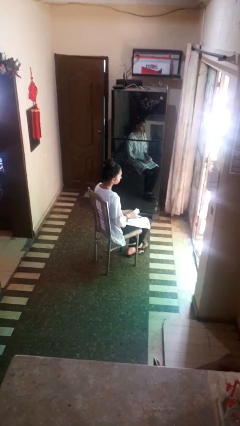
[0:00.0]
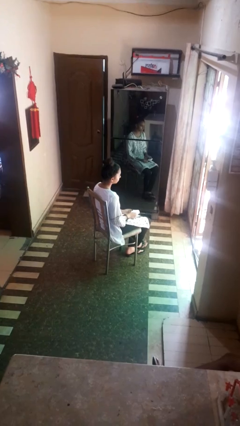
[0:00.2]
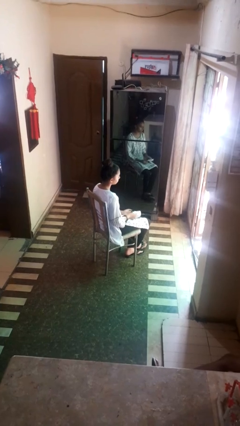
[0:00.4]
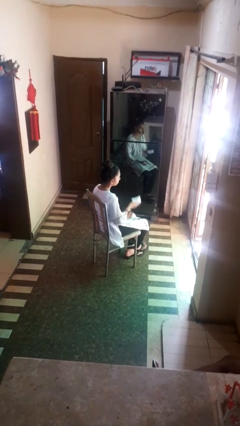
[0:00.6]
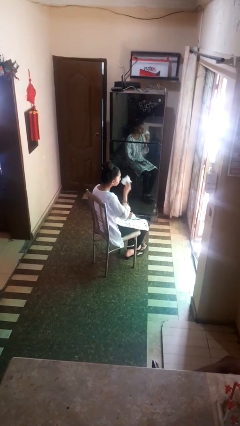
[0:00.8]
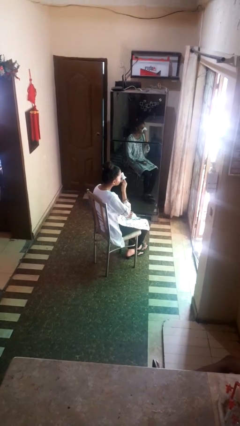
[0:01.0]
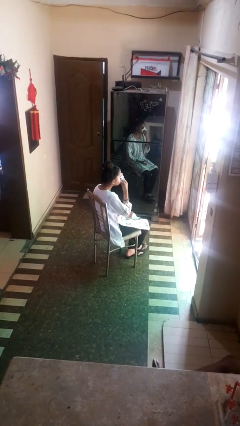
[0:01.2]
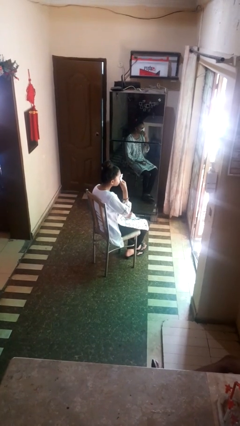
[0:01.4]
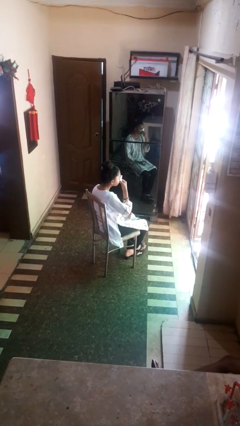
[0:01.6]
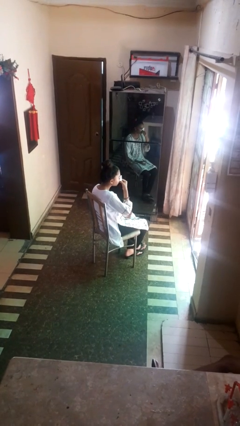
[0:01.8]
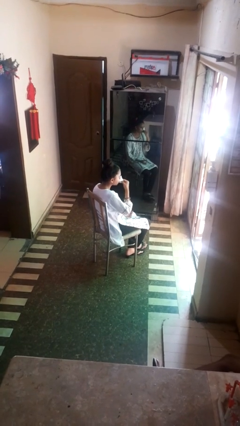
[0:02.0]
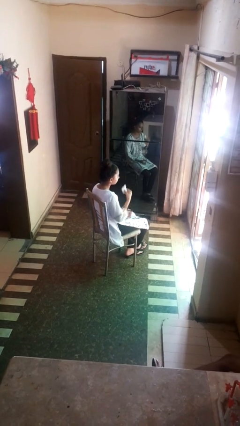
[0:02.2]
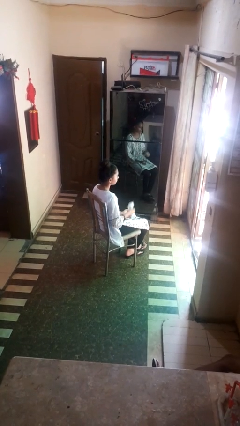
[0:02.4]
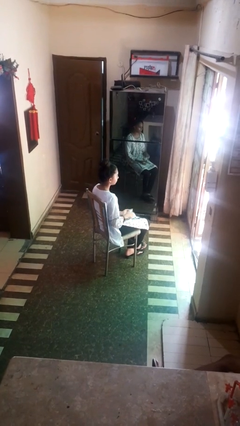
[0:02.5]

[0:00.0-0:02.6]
person blows nose

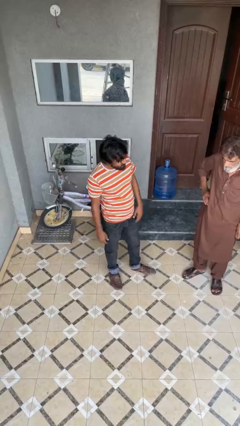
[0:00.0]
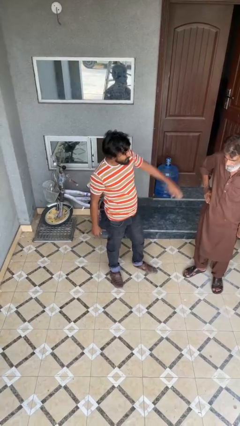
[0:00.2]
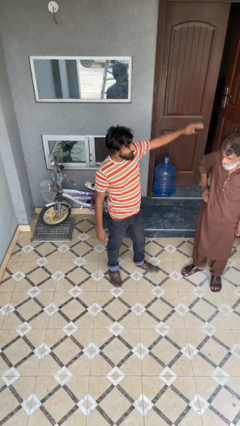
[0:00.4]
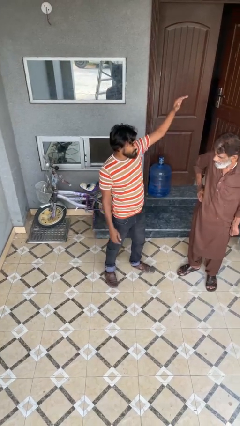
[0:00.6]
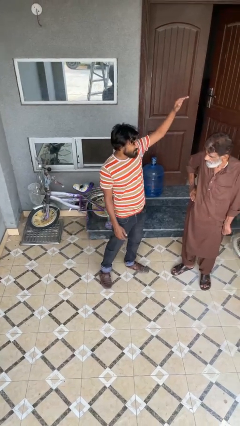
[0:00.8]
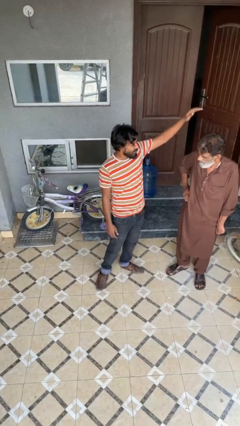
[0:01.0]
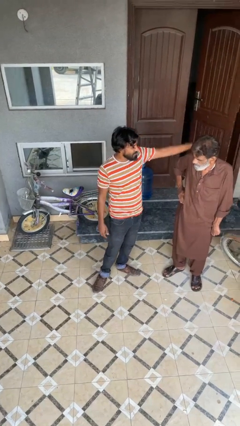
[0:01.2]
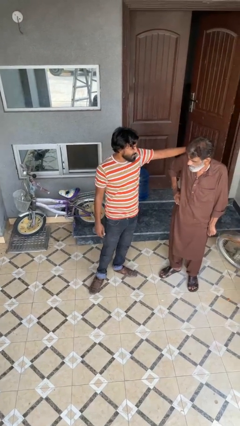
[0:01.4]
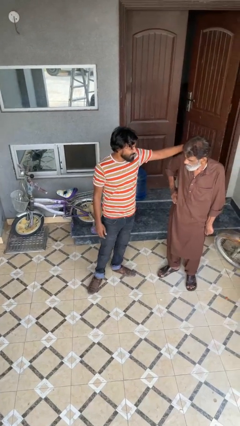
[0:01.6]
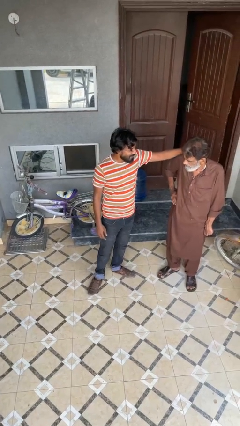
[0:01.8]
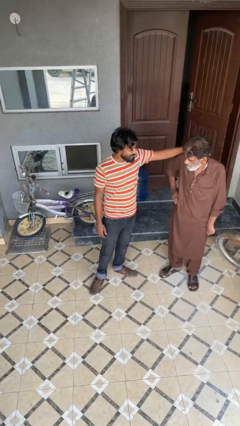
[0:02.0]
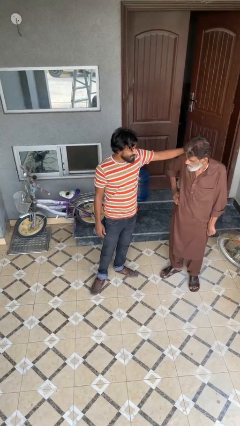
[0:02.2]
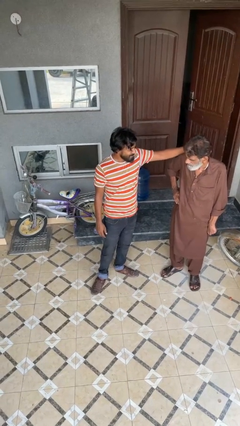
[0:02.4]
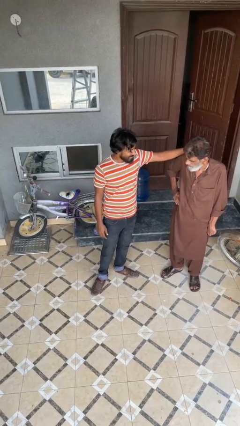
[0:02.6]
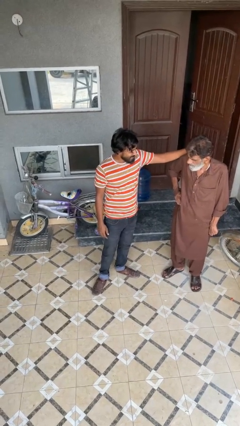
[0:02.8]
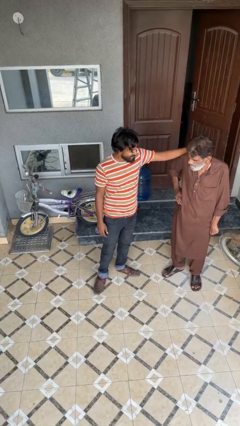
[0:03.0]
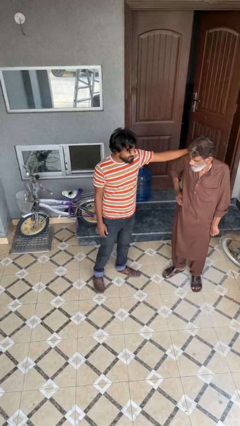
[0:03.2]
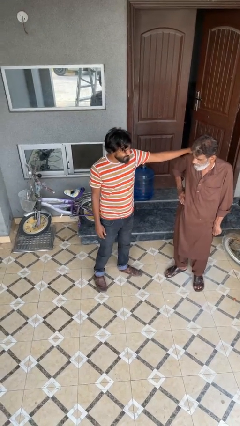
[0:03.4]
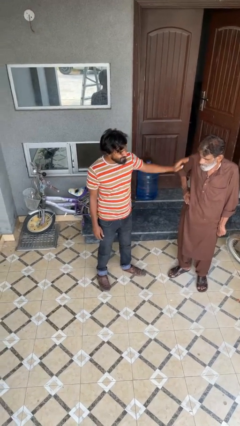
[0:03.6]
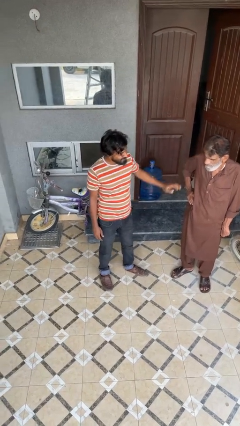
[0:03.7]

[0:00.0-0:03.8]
person pounds shoulders of person

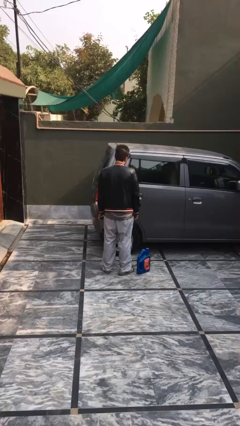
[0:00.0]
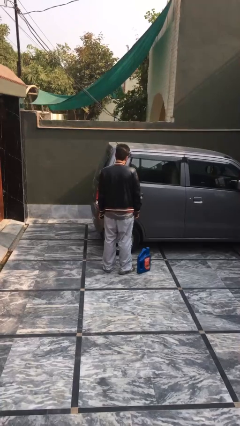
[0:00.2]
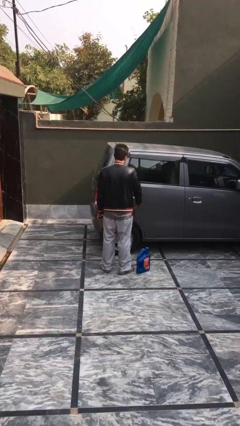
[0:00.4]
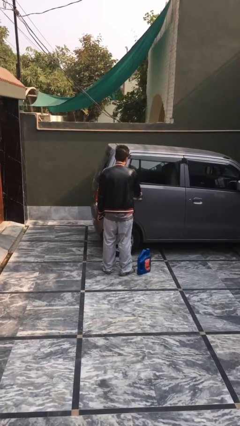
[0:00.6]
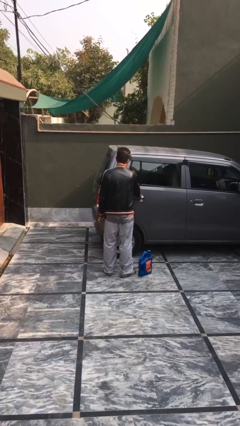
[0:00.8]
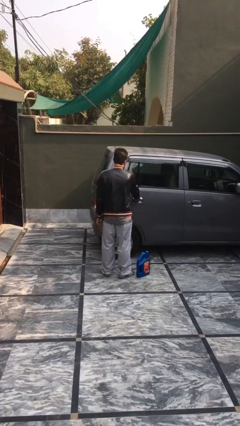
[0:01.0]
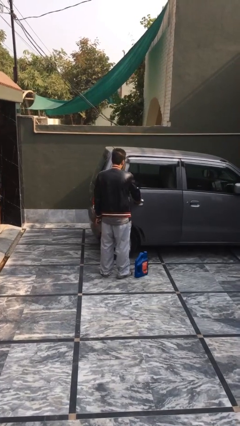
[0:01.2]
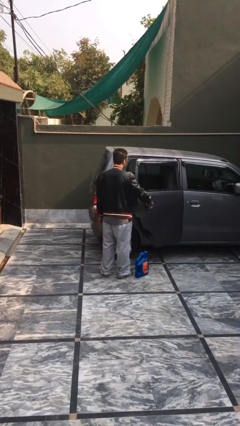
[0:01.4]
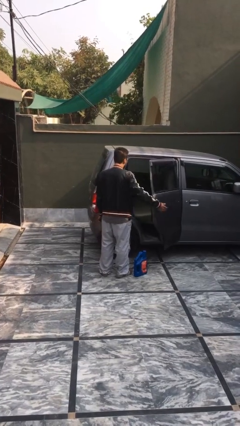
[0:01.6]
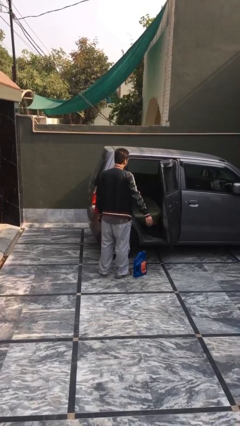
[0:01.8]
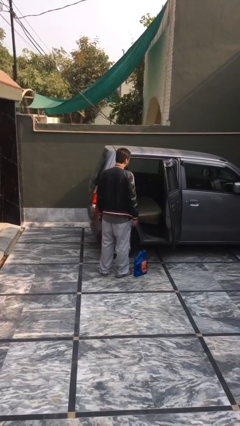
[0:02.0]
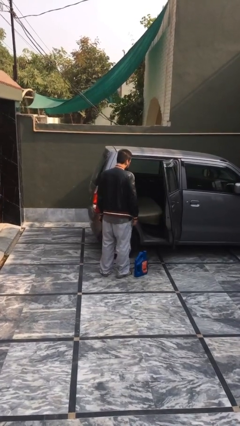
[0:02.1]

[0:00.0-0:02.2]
person opens car door

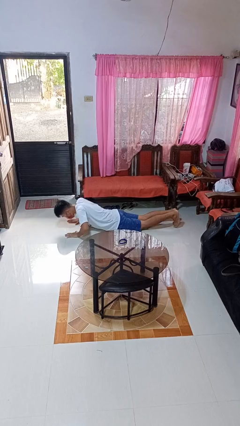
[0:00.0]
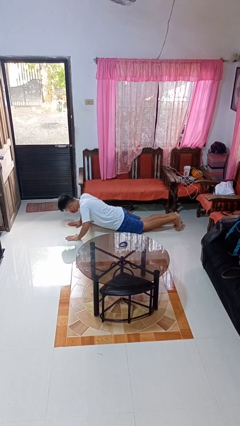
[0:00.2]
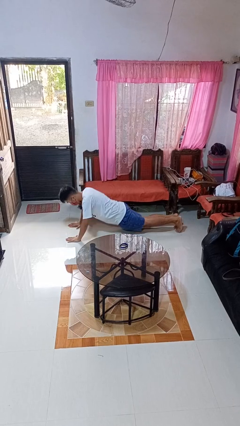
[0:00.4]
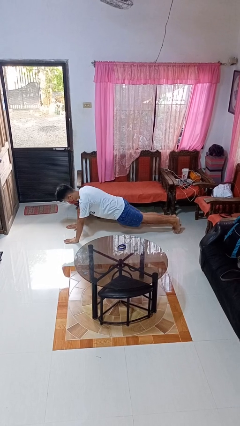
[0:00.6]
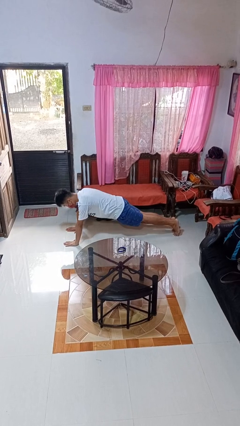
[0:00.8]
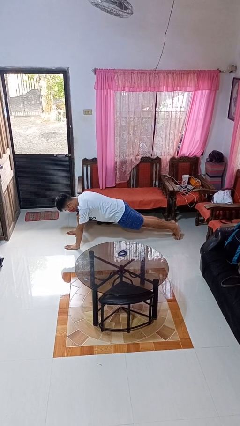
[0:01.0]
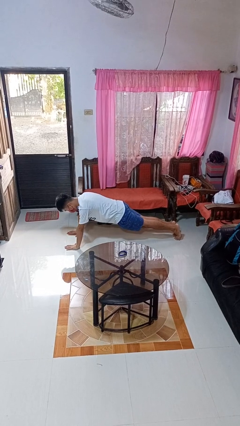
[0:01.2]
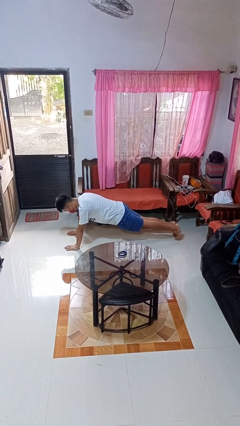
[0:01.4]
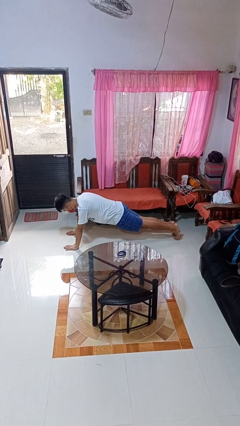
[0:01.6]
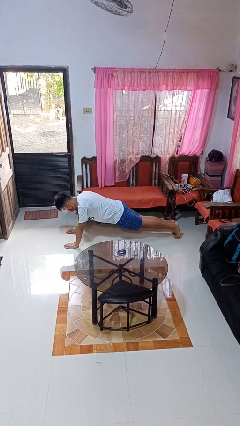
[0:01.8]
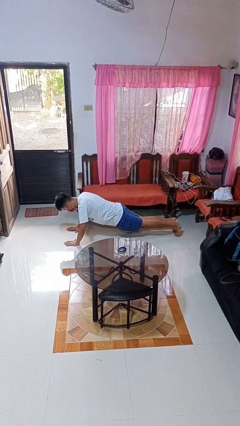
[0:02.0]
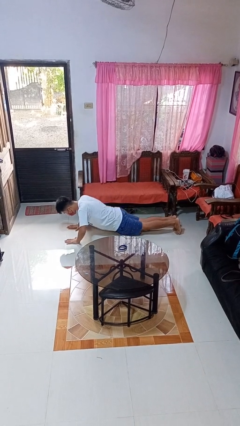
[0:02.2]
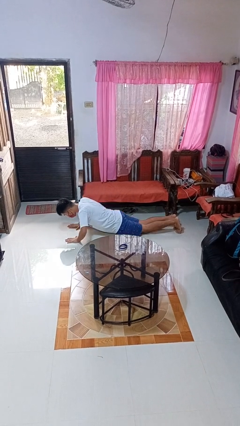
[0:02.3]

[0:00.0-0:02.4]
person exercises with pushup

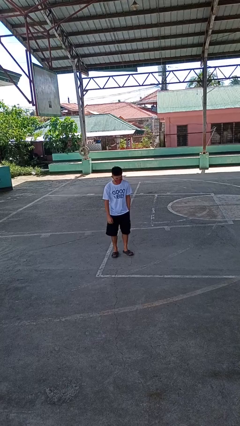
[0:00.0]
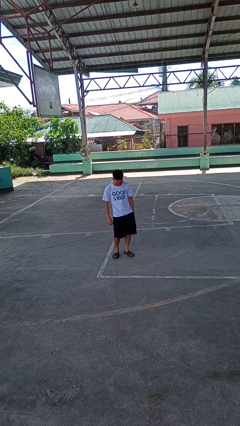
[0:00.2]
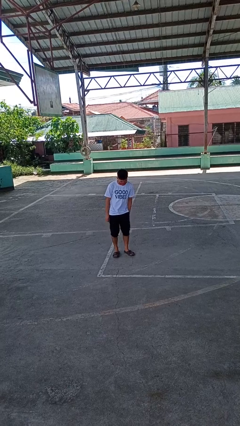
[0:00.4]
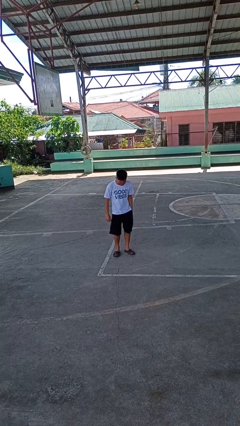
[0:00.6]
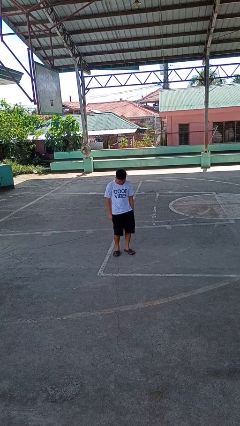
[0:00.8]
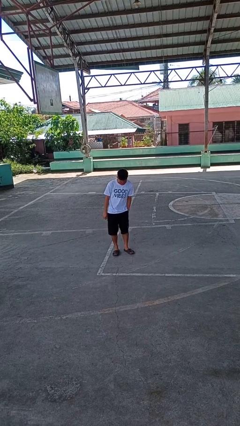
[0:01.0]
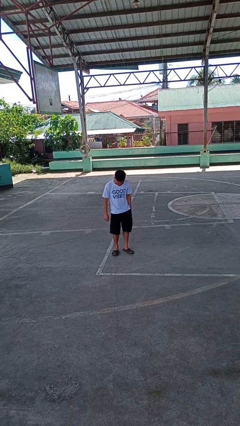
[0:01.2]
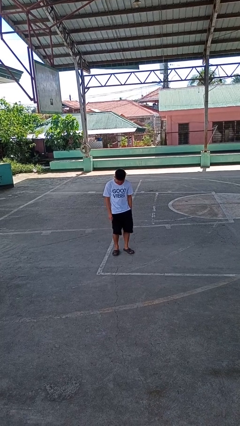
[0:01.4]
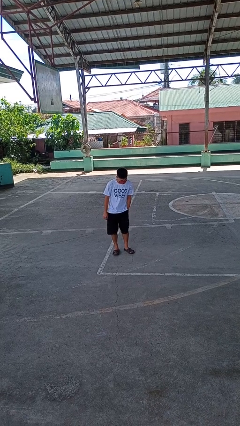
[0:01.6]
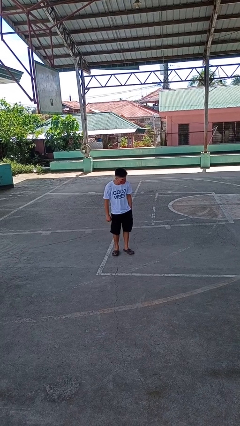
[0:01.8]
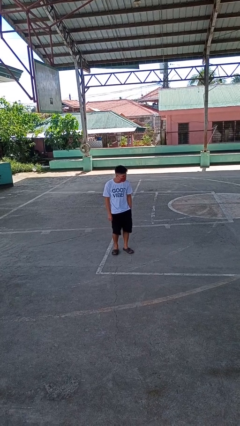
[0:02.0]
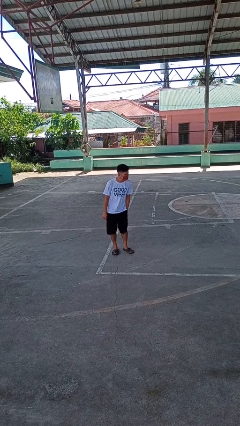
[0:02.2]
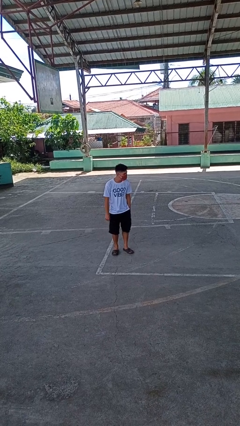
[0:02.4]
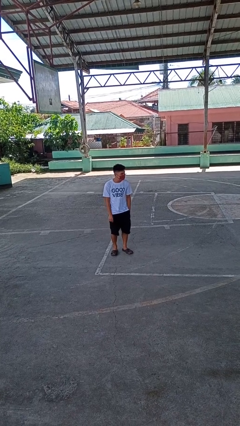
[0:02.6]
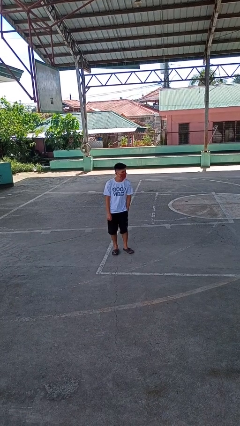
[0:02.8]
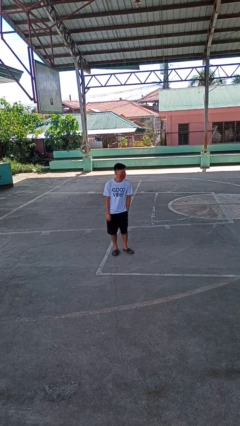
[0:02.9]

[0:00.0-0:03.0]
person wiggles hips

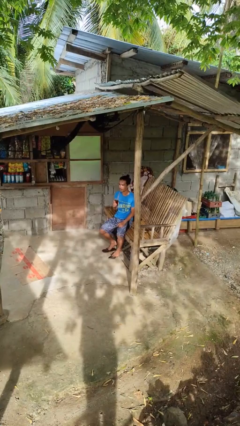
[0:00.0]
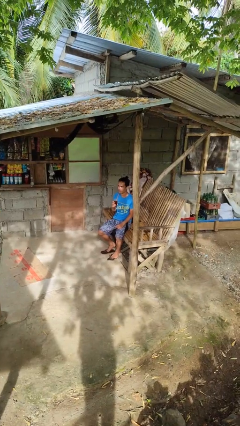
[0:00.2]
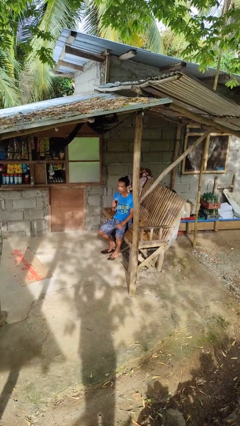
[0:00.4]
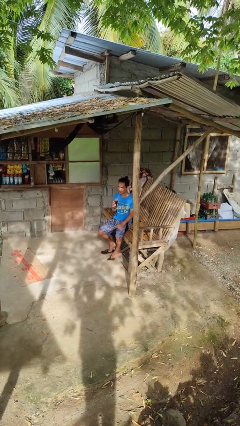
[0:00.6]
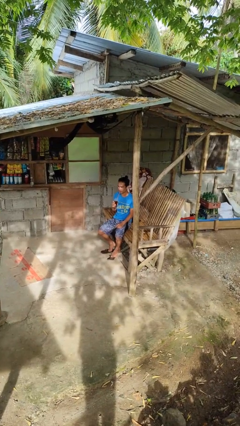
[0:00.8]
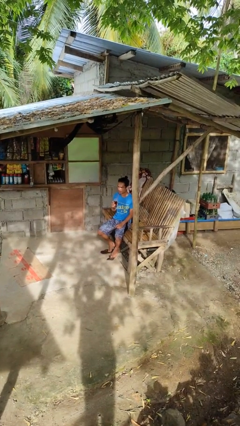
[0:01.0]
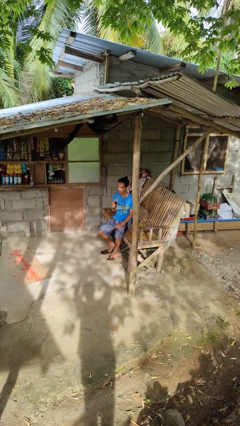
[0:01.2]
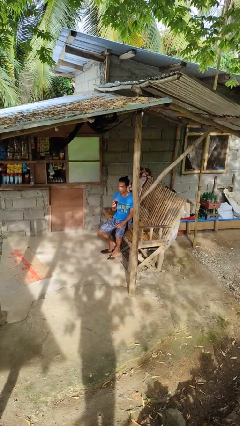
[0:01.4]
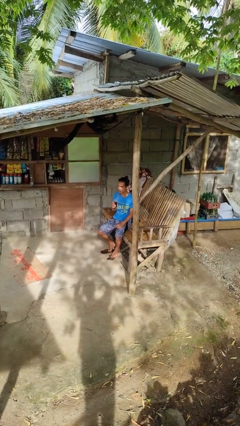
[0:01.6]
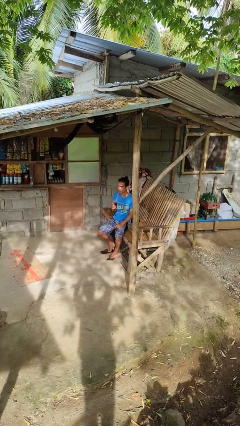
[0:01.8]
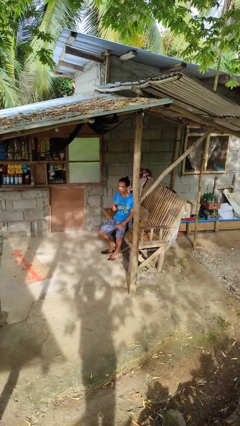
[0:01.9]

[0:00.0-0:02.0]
person drinks from straw

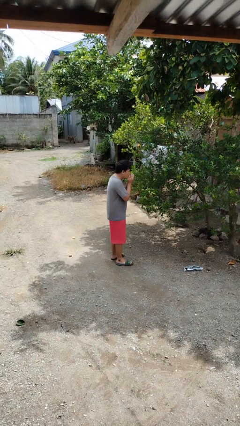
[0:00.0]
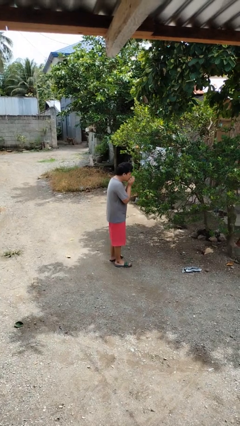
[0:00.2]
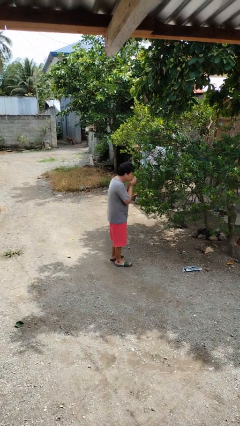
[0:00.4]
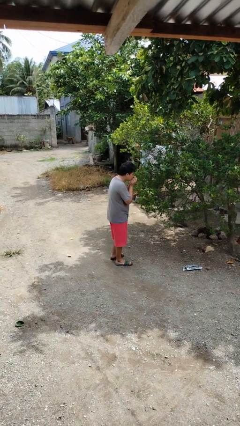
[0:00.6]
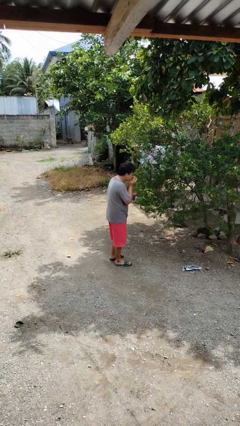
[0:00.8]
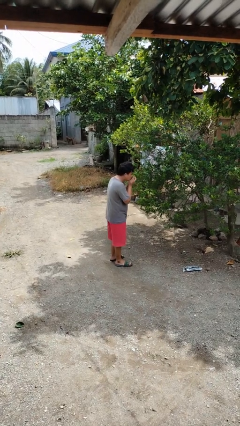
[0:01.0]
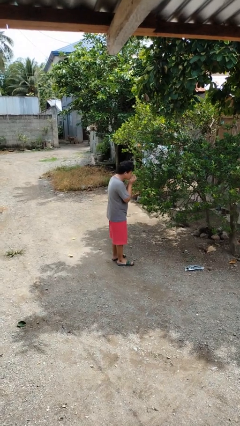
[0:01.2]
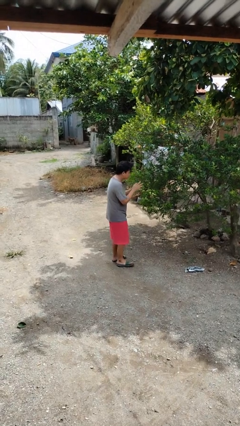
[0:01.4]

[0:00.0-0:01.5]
person blows into hands
